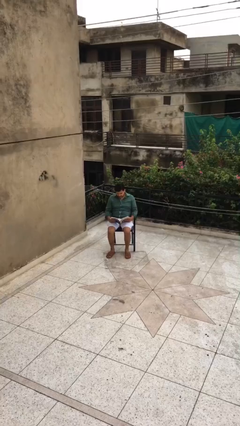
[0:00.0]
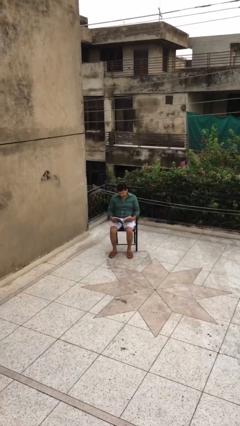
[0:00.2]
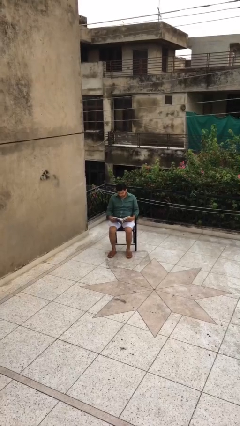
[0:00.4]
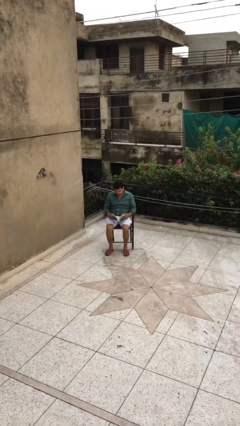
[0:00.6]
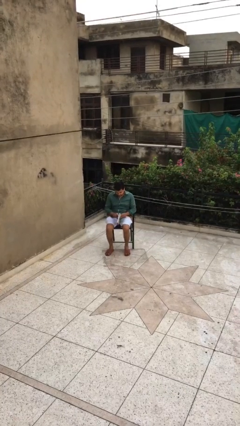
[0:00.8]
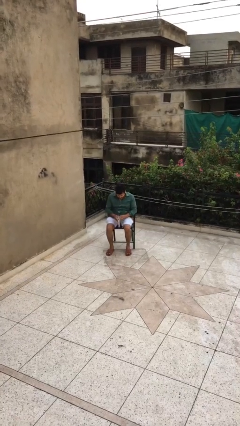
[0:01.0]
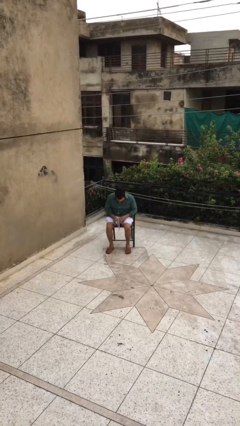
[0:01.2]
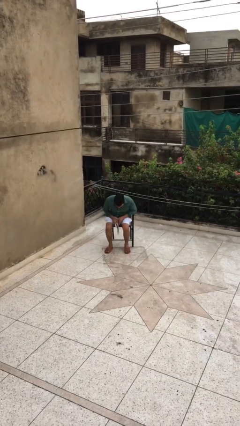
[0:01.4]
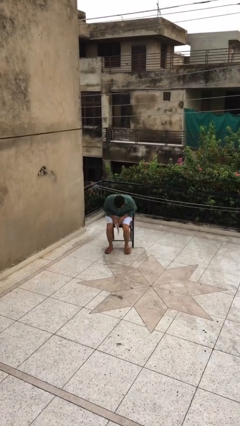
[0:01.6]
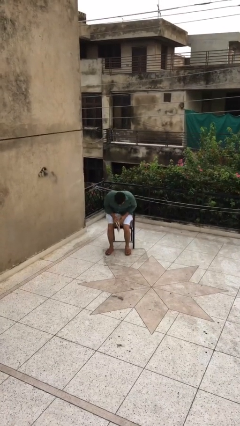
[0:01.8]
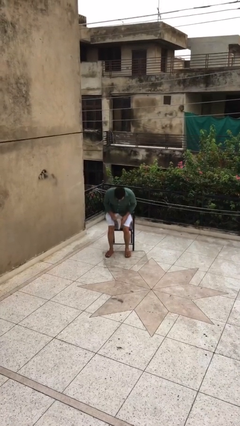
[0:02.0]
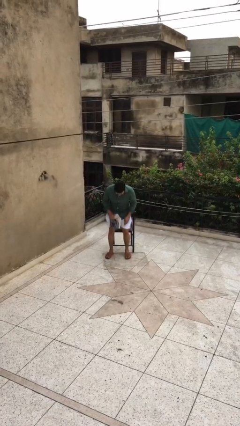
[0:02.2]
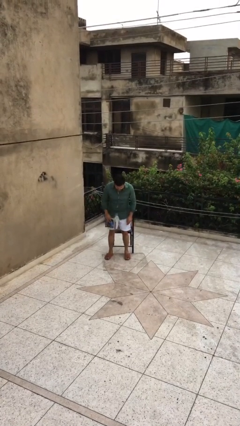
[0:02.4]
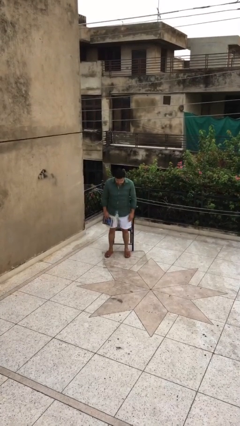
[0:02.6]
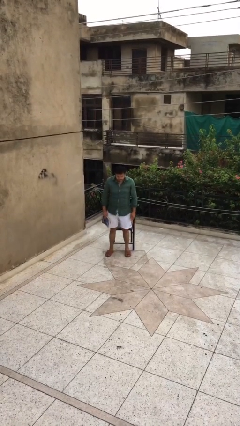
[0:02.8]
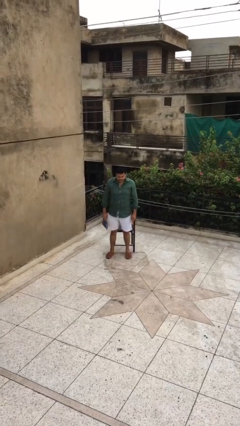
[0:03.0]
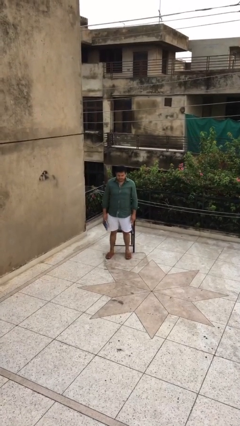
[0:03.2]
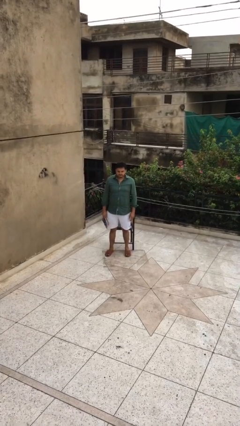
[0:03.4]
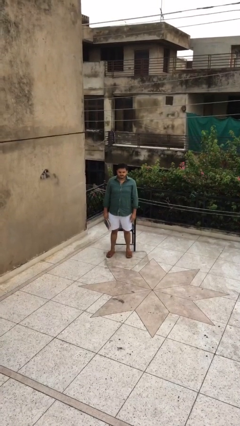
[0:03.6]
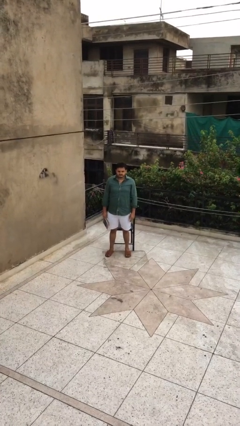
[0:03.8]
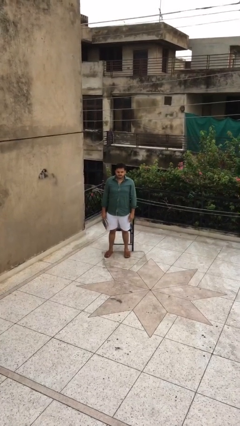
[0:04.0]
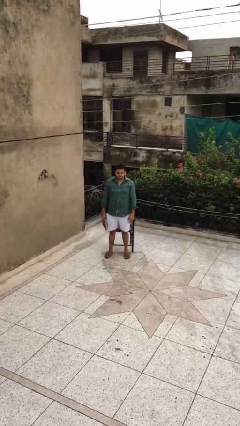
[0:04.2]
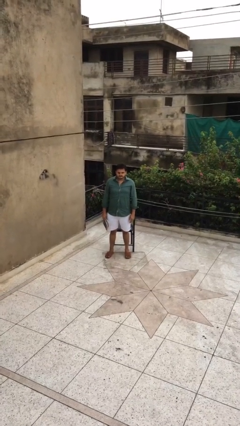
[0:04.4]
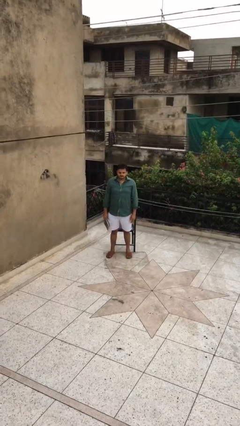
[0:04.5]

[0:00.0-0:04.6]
person stands up

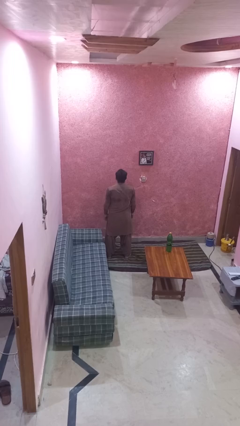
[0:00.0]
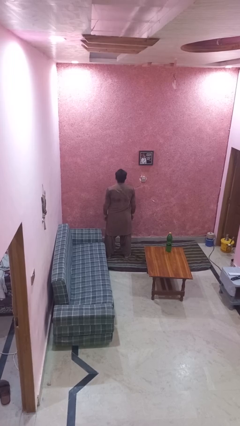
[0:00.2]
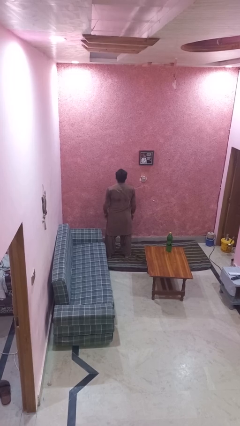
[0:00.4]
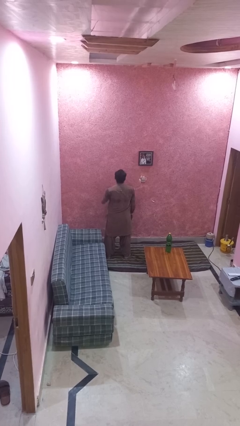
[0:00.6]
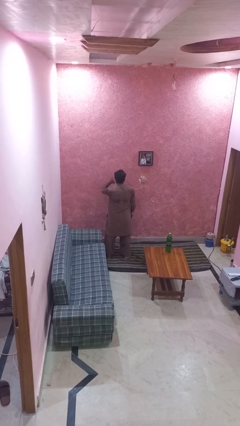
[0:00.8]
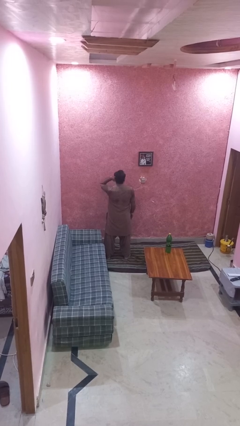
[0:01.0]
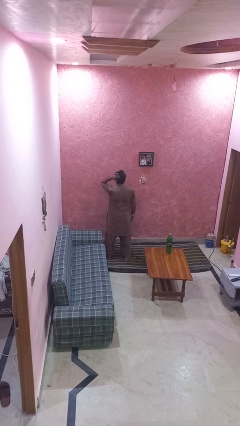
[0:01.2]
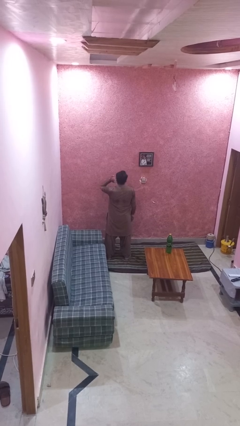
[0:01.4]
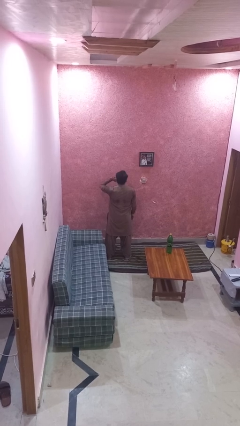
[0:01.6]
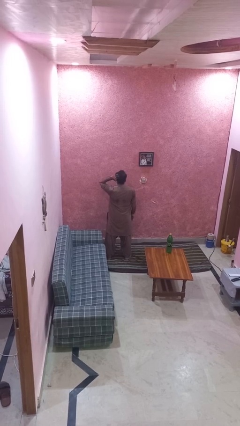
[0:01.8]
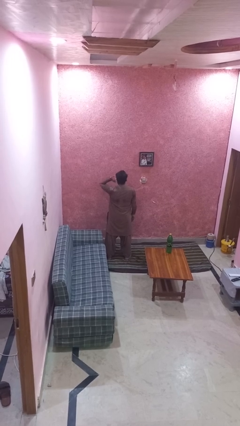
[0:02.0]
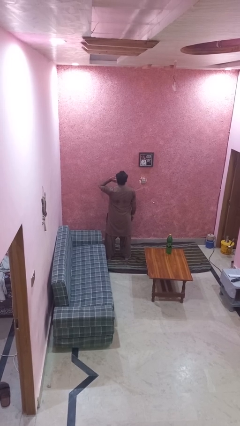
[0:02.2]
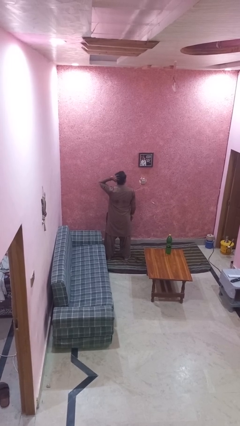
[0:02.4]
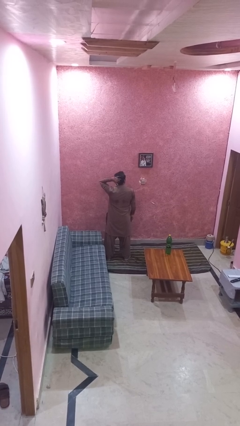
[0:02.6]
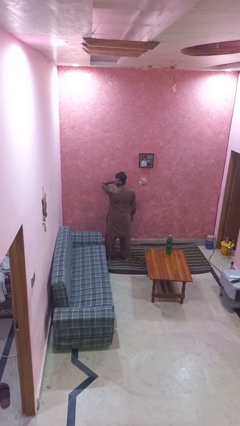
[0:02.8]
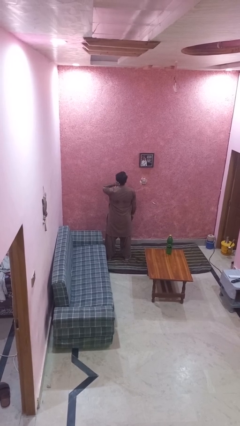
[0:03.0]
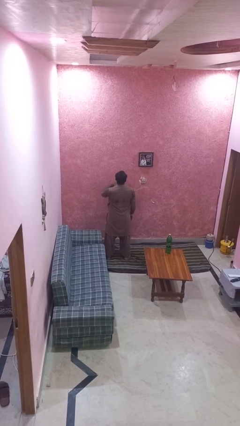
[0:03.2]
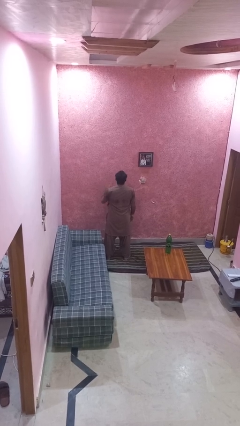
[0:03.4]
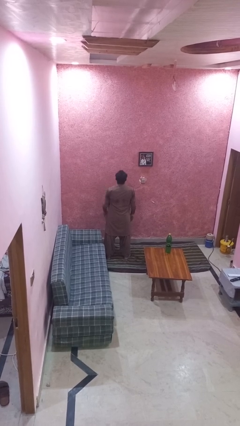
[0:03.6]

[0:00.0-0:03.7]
person strokes hair

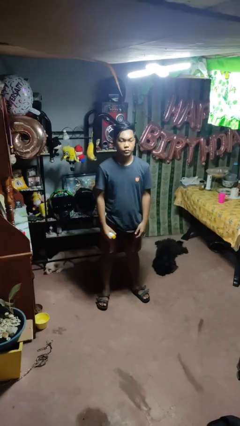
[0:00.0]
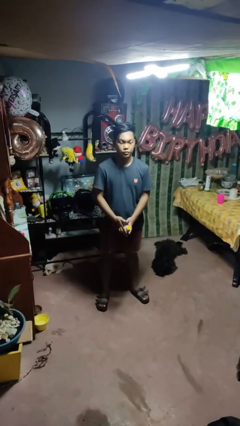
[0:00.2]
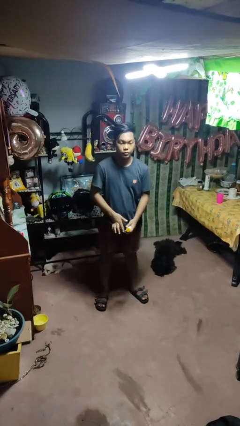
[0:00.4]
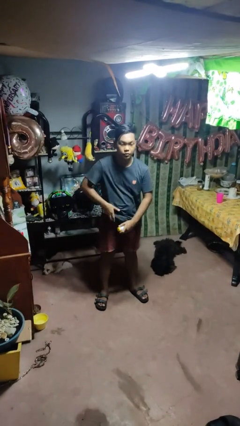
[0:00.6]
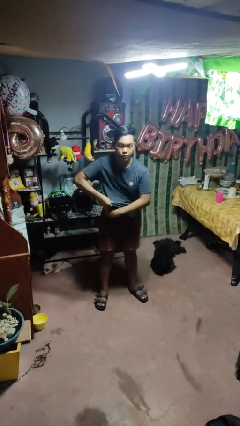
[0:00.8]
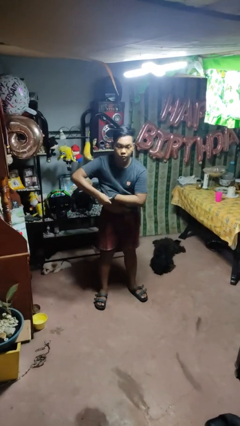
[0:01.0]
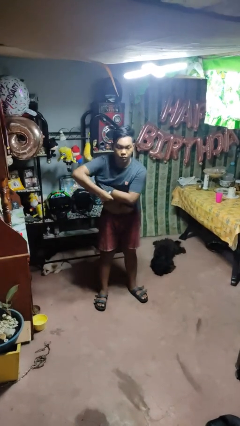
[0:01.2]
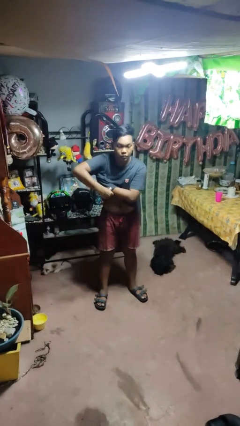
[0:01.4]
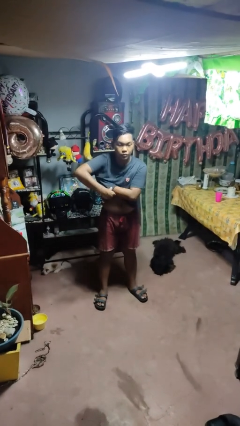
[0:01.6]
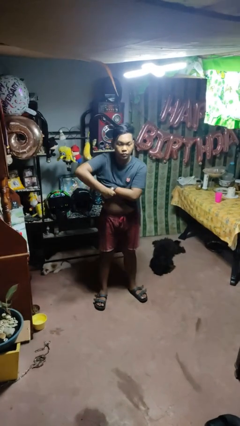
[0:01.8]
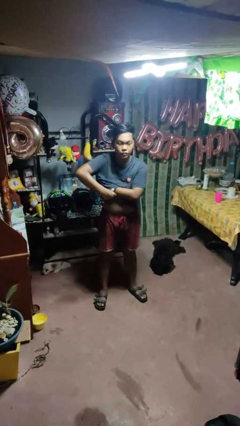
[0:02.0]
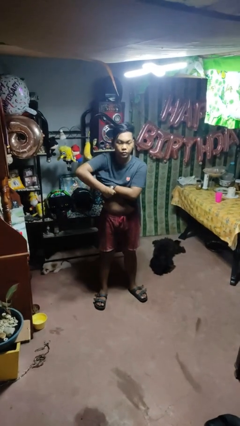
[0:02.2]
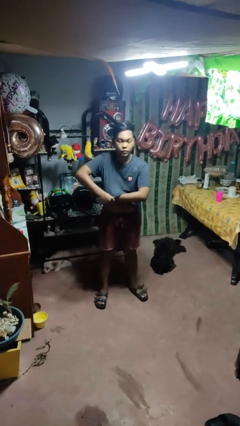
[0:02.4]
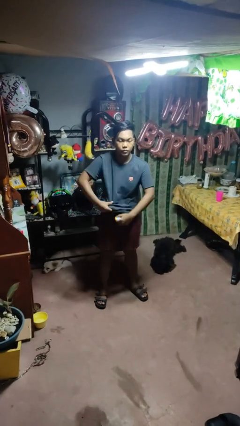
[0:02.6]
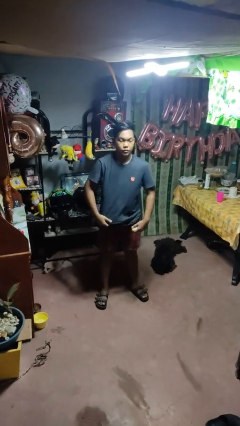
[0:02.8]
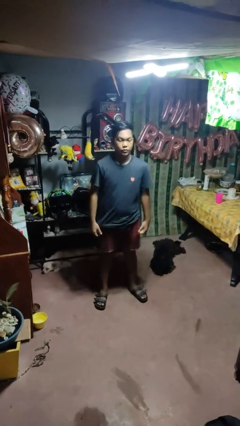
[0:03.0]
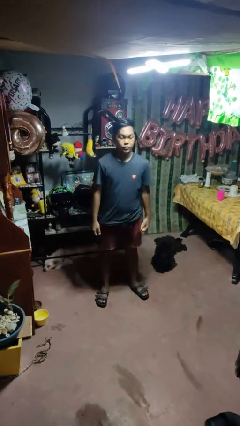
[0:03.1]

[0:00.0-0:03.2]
person applies deodorant

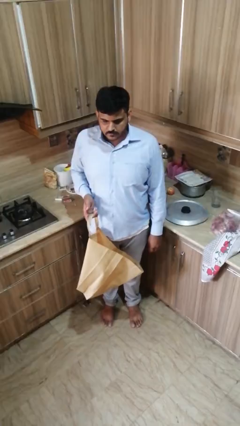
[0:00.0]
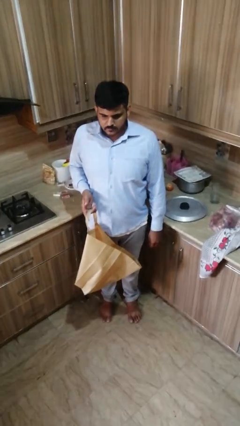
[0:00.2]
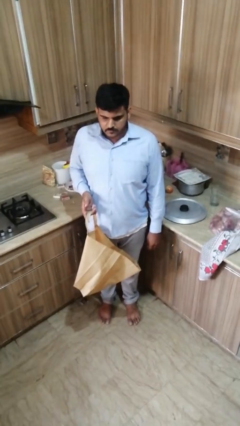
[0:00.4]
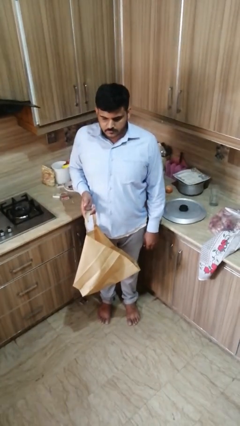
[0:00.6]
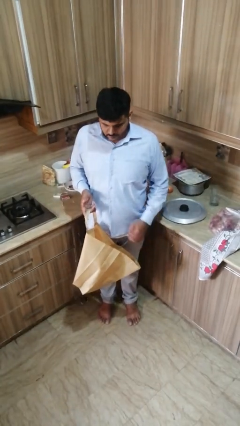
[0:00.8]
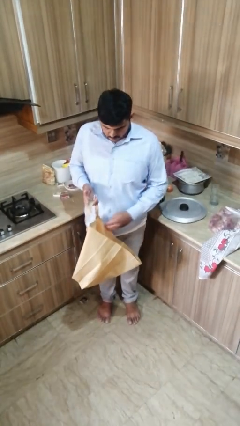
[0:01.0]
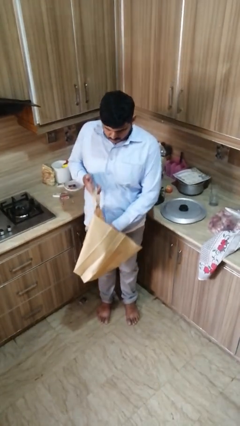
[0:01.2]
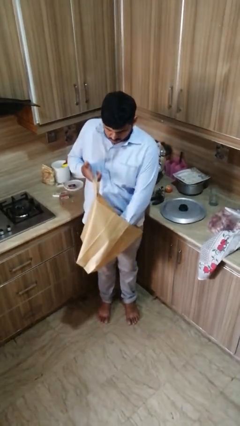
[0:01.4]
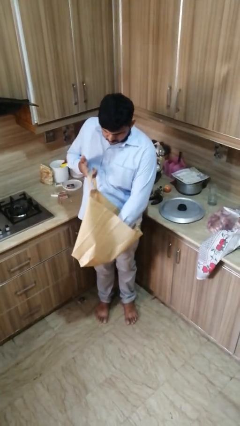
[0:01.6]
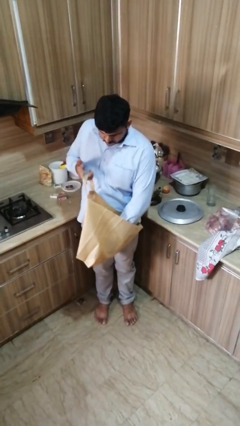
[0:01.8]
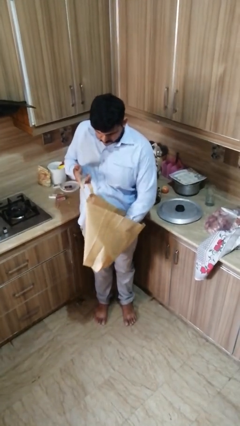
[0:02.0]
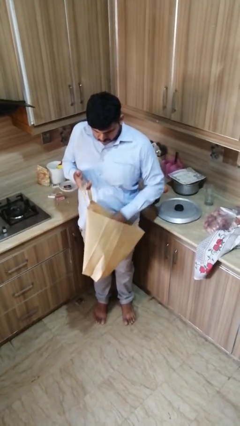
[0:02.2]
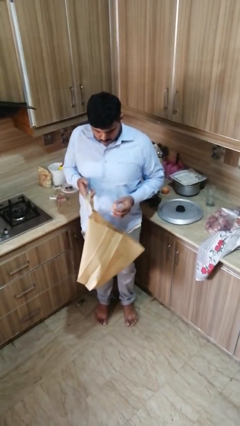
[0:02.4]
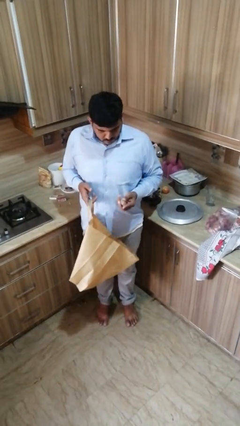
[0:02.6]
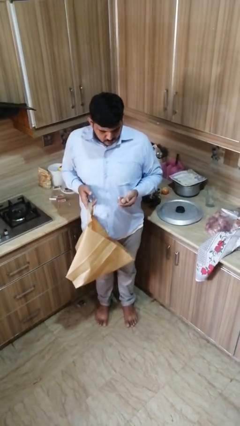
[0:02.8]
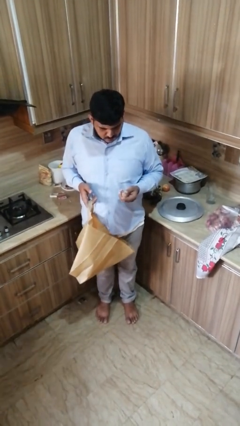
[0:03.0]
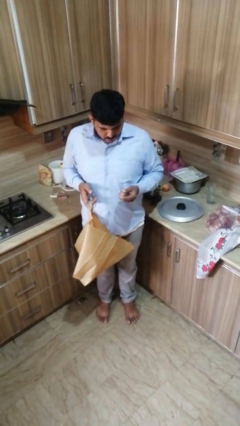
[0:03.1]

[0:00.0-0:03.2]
person takes object from bag

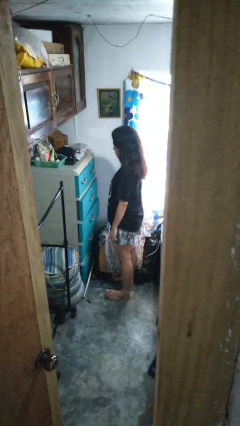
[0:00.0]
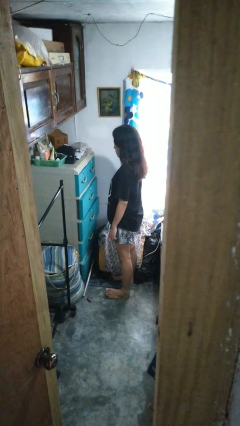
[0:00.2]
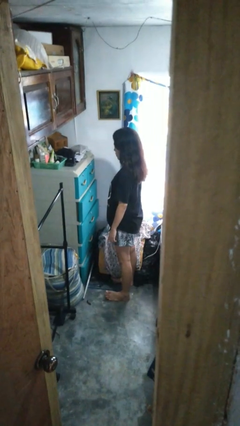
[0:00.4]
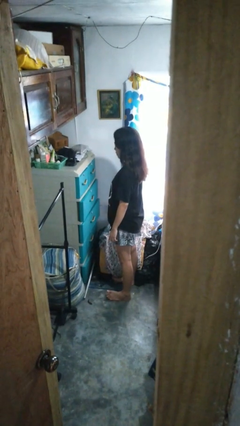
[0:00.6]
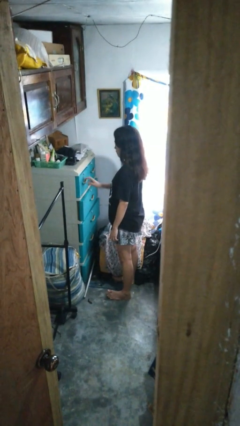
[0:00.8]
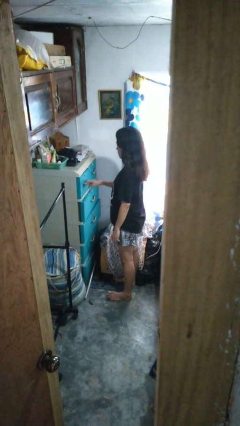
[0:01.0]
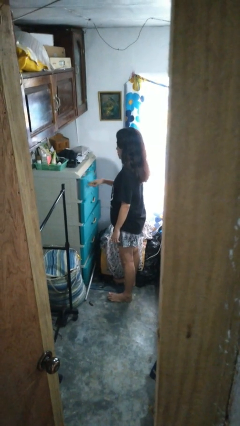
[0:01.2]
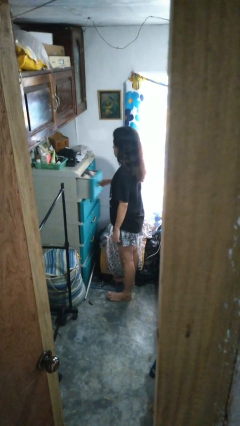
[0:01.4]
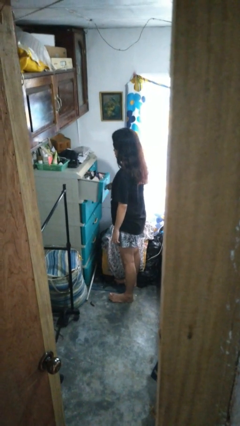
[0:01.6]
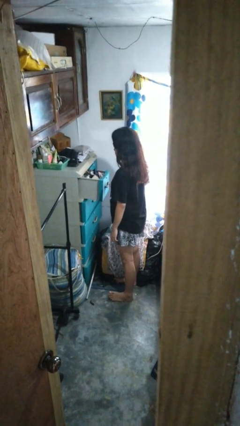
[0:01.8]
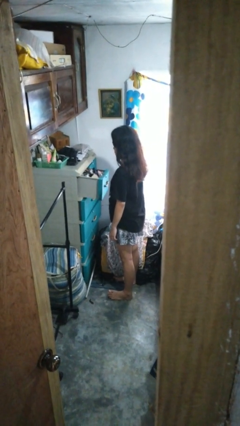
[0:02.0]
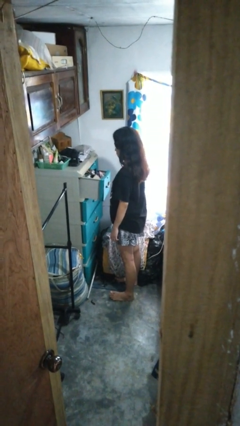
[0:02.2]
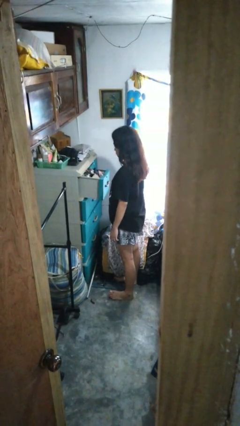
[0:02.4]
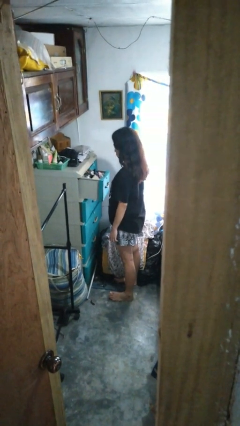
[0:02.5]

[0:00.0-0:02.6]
person opens dresser drawer

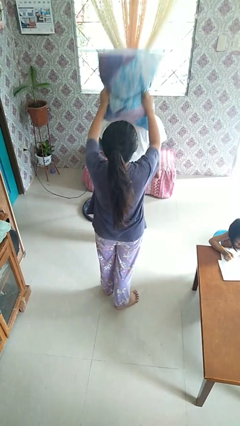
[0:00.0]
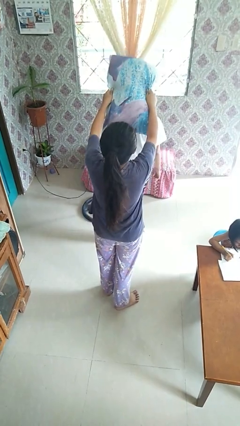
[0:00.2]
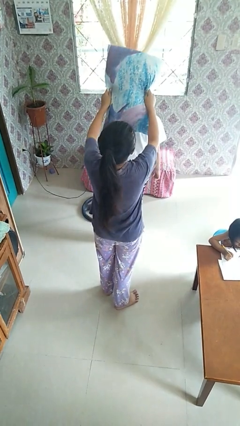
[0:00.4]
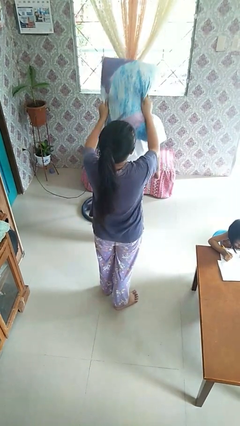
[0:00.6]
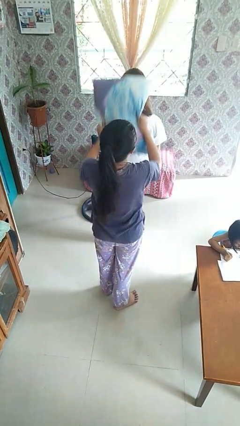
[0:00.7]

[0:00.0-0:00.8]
person hits person with pillow
